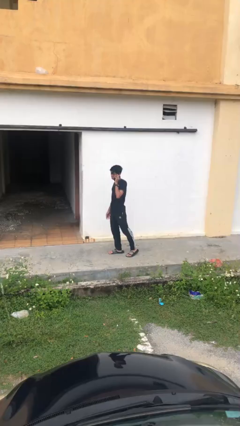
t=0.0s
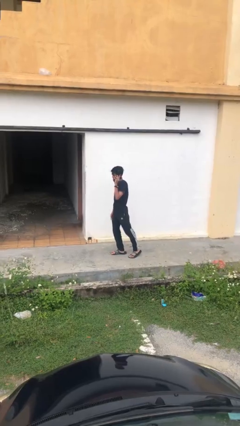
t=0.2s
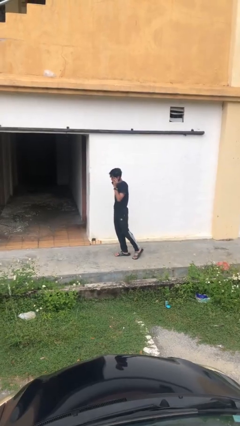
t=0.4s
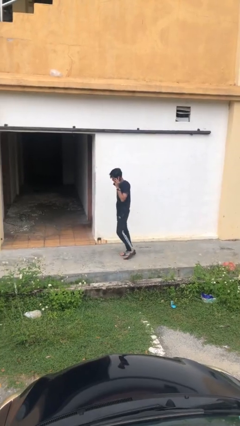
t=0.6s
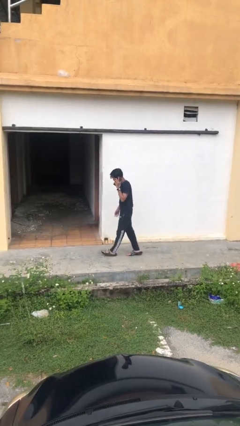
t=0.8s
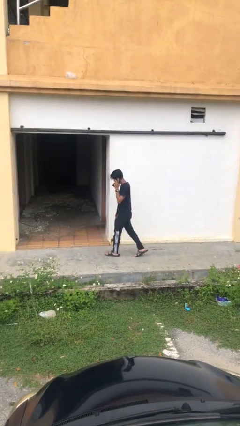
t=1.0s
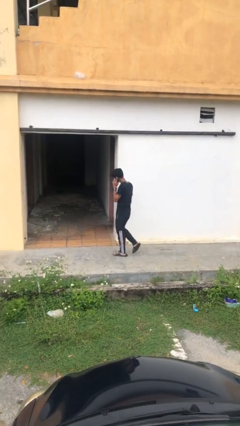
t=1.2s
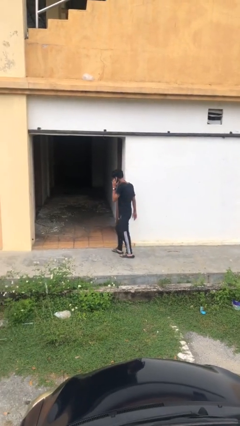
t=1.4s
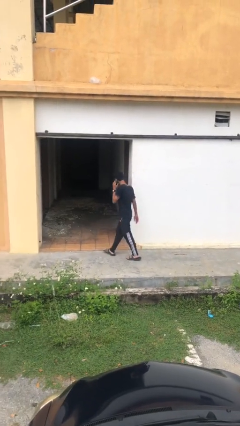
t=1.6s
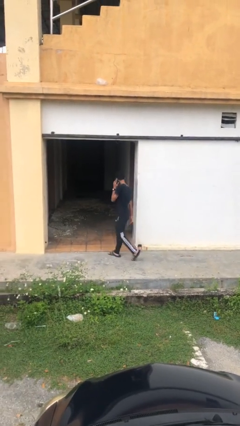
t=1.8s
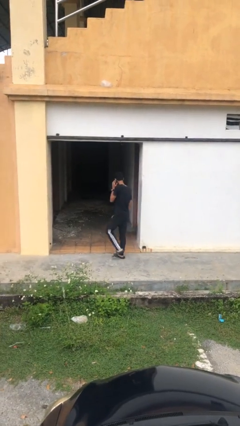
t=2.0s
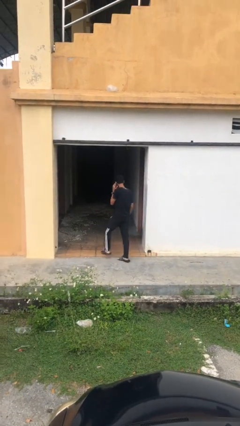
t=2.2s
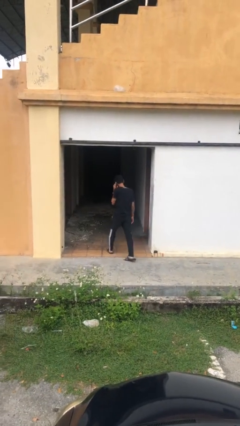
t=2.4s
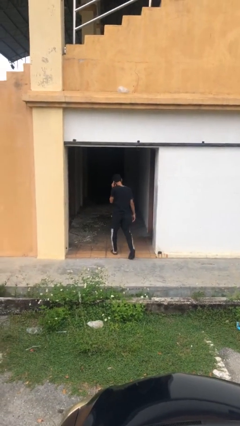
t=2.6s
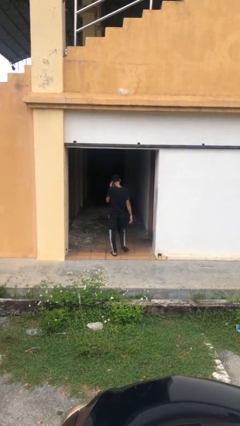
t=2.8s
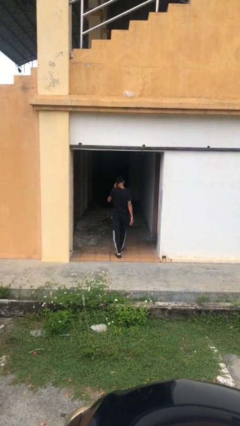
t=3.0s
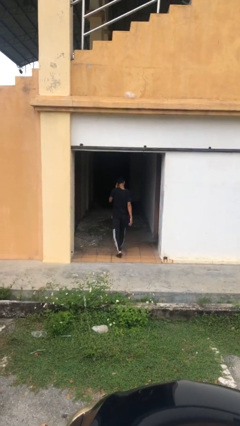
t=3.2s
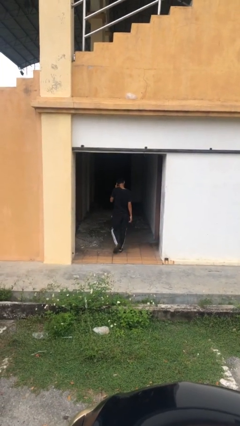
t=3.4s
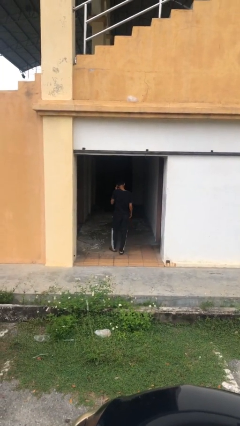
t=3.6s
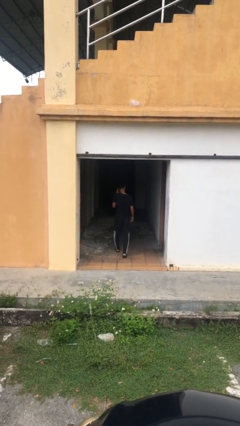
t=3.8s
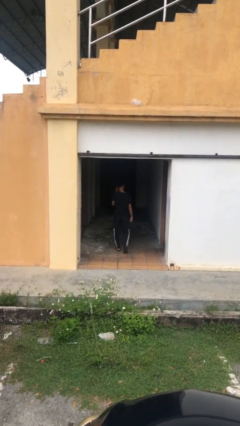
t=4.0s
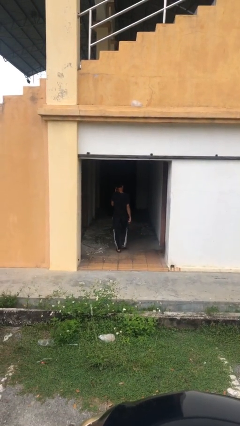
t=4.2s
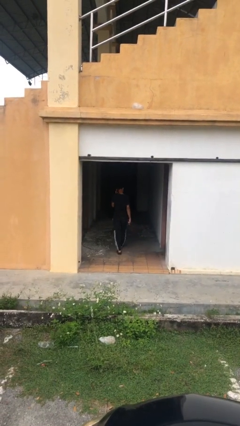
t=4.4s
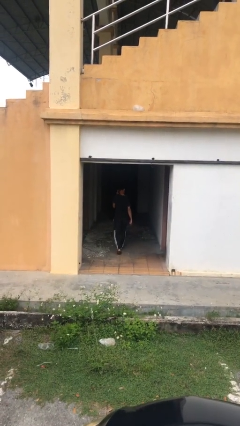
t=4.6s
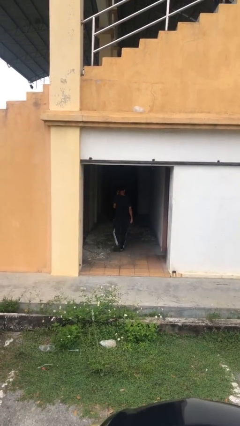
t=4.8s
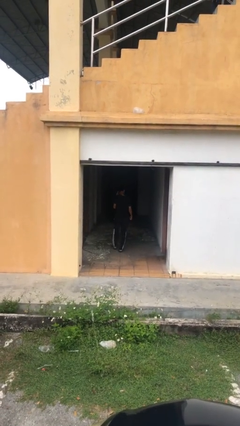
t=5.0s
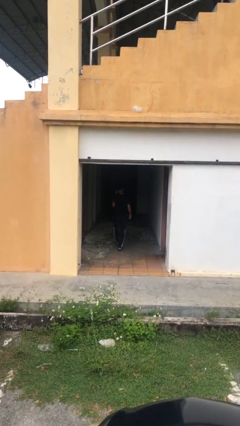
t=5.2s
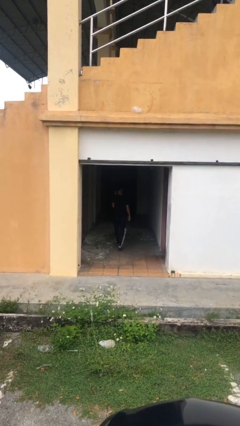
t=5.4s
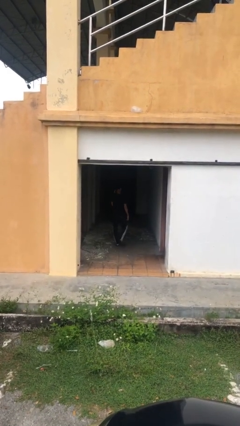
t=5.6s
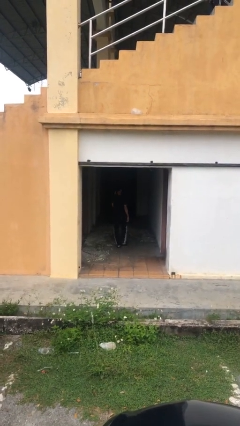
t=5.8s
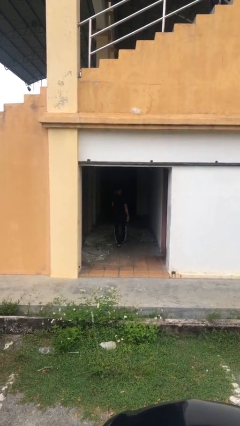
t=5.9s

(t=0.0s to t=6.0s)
person exits scene through structure

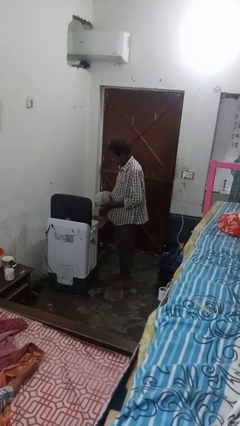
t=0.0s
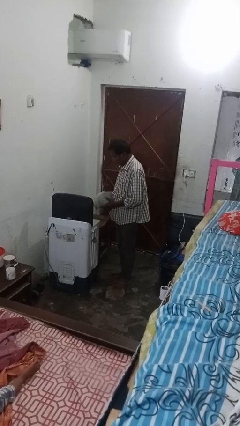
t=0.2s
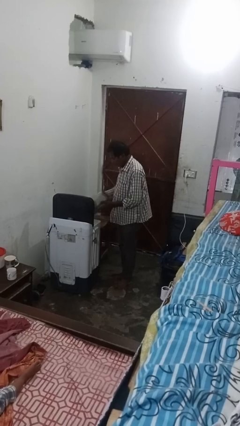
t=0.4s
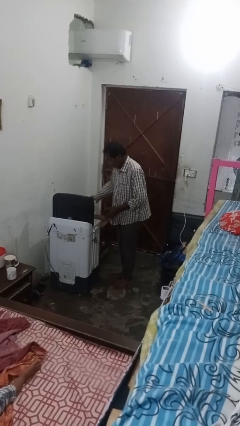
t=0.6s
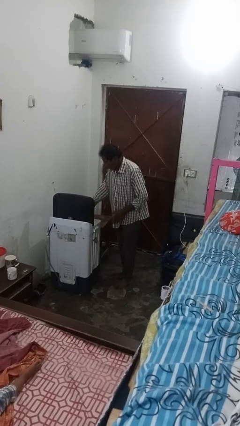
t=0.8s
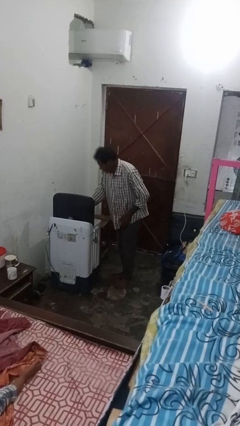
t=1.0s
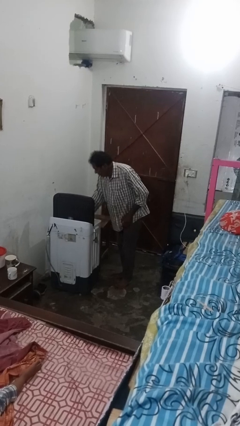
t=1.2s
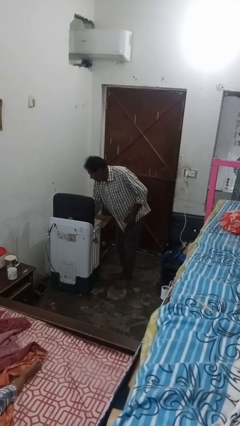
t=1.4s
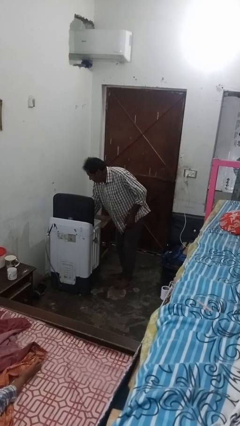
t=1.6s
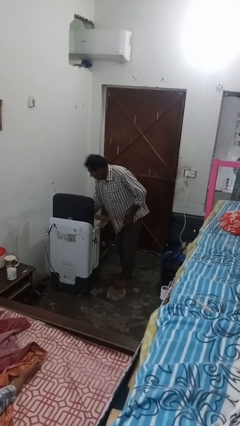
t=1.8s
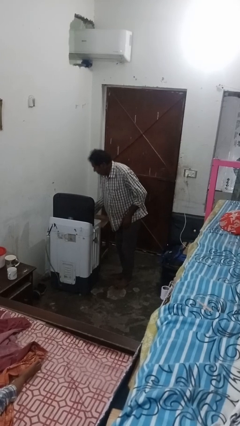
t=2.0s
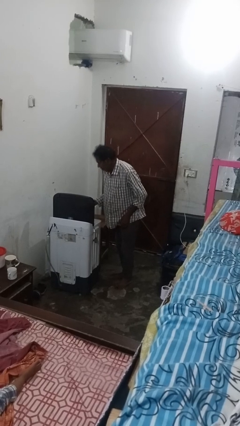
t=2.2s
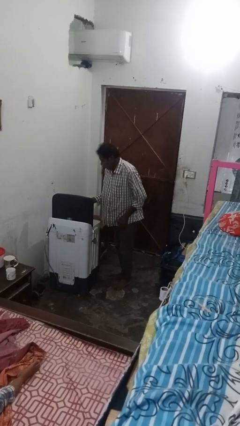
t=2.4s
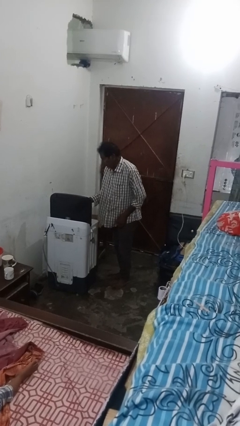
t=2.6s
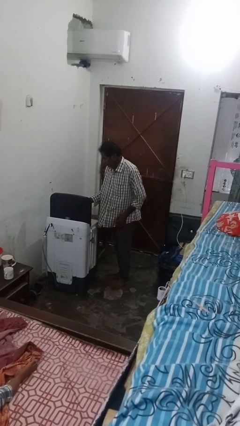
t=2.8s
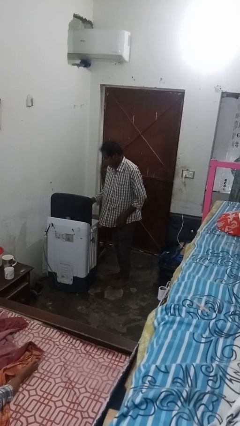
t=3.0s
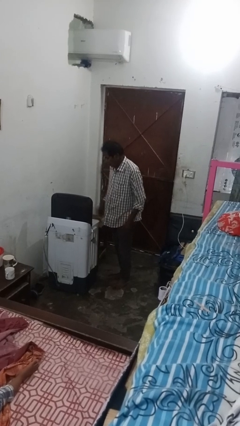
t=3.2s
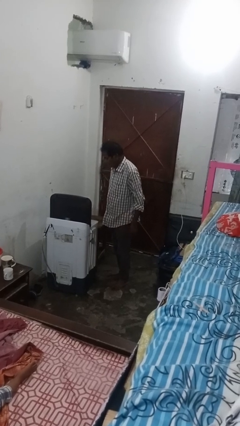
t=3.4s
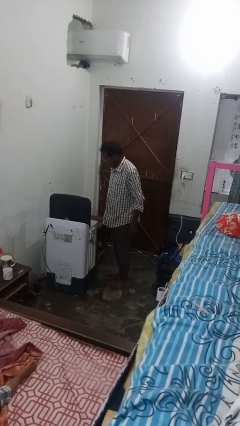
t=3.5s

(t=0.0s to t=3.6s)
person loads dryer

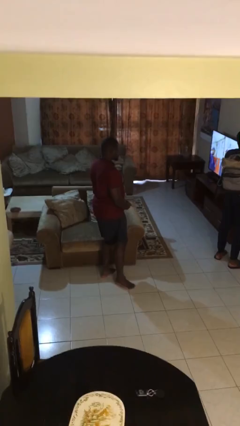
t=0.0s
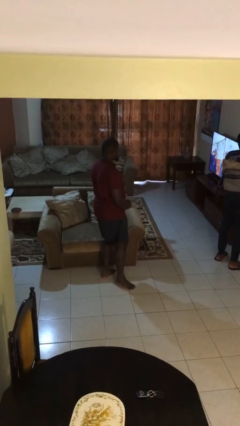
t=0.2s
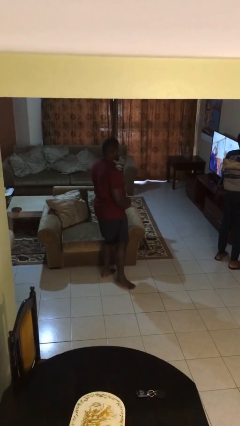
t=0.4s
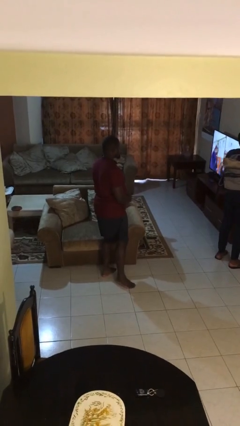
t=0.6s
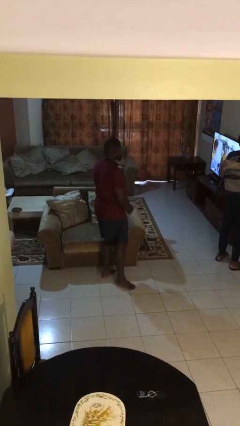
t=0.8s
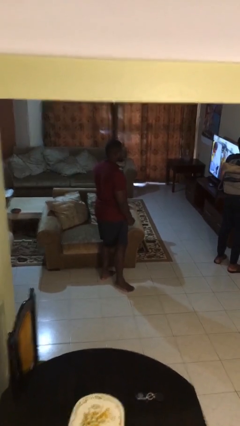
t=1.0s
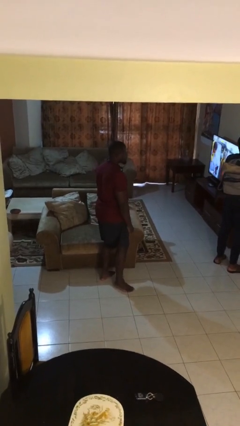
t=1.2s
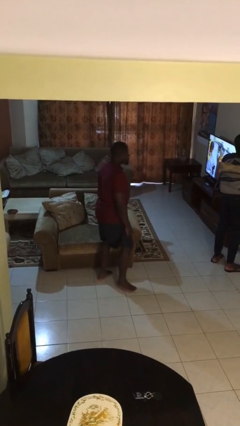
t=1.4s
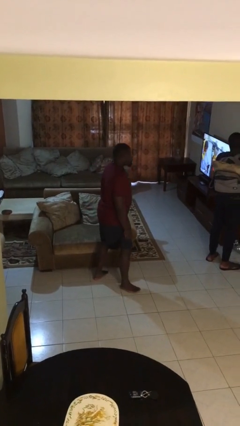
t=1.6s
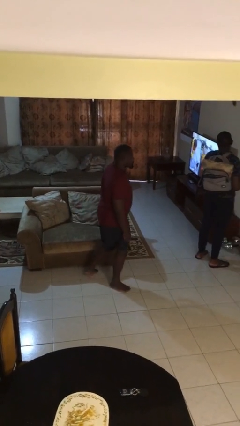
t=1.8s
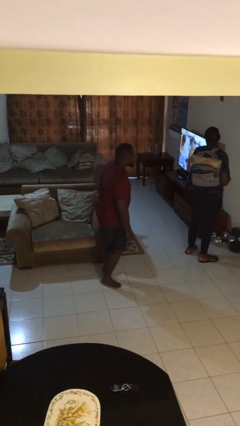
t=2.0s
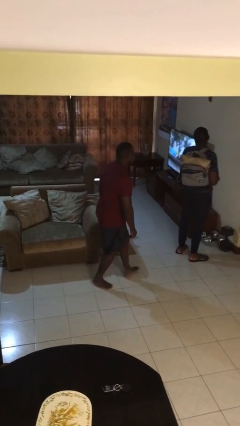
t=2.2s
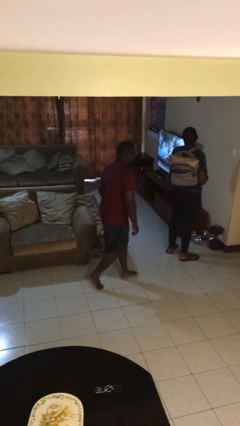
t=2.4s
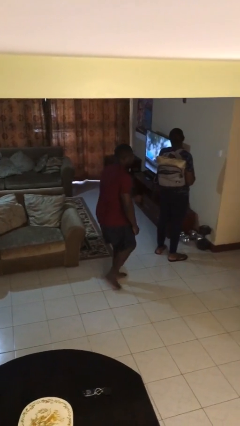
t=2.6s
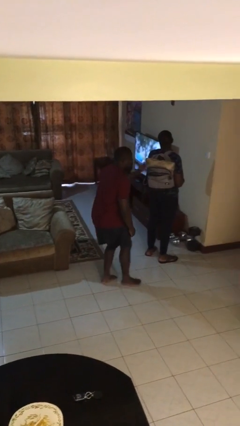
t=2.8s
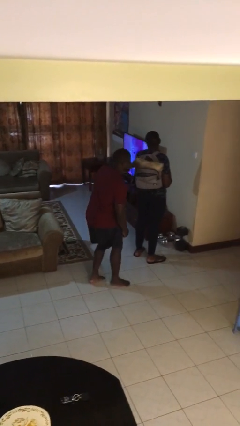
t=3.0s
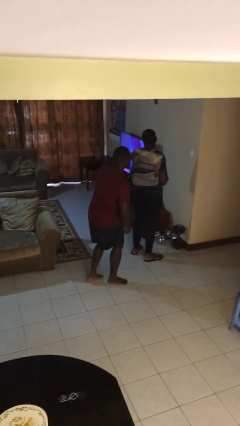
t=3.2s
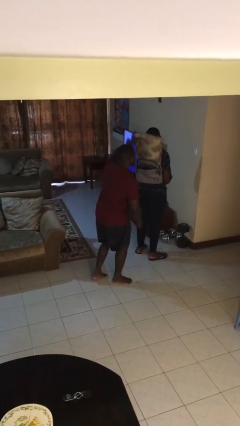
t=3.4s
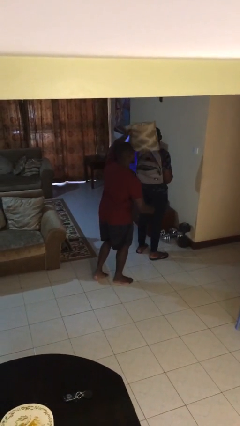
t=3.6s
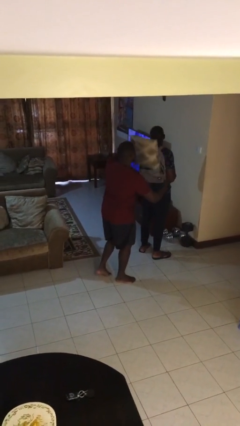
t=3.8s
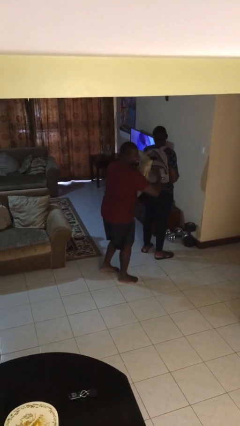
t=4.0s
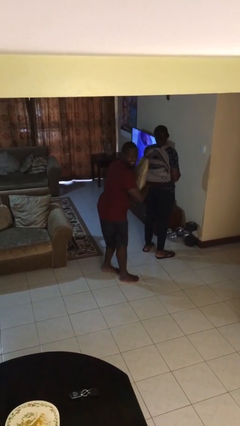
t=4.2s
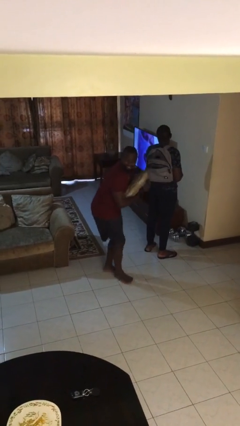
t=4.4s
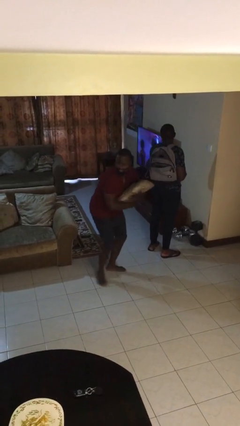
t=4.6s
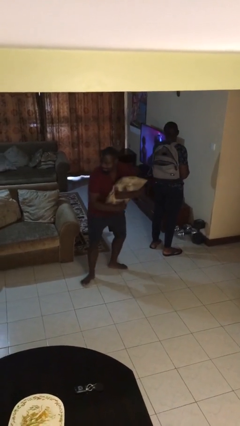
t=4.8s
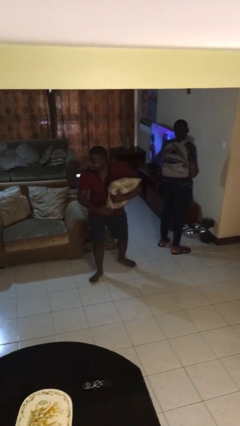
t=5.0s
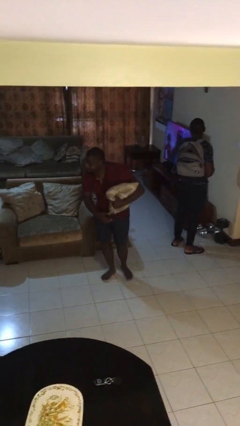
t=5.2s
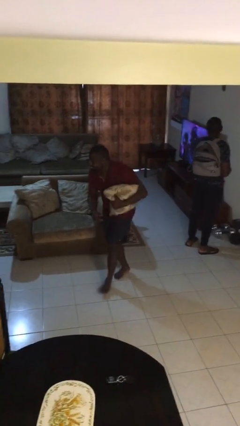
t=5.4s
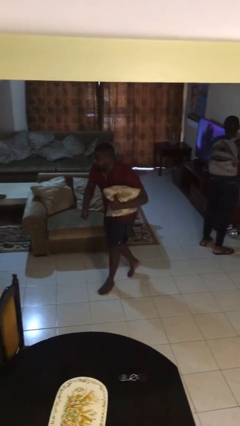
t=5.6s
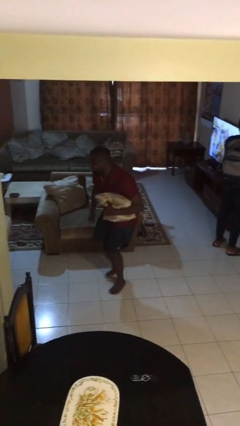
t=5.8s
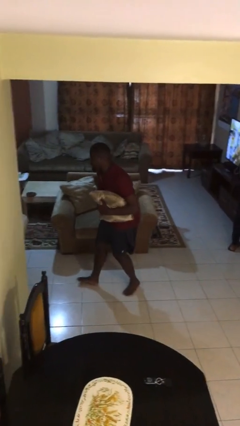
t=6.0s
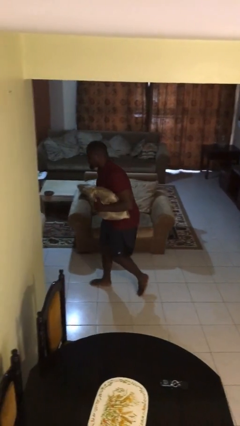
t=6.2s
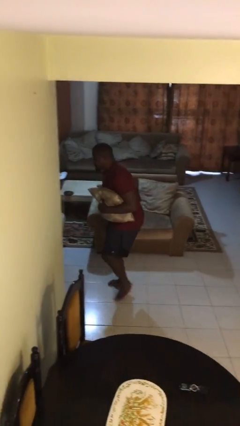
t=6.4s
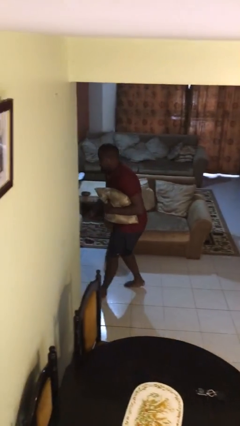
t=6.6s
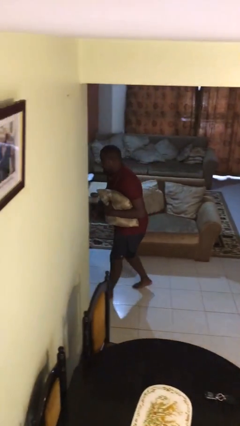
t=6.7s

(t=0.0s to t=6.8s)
person steals object from person

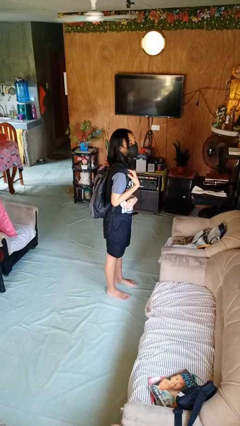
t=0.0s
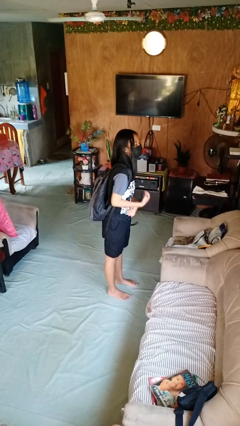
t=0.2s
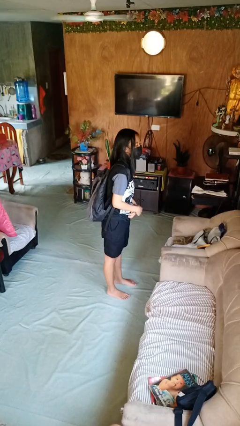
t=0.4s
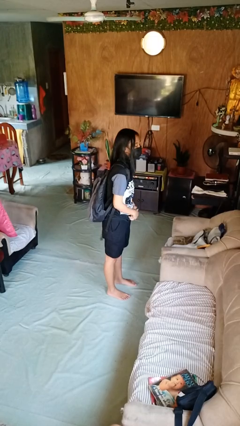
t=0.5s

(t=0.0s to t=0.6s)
person puts on backpack

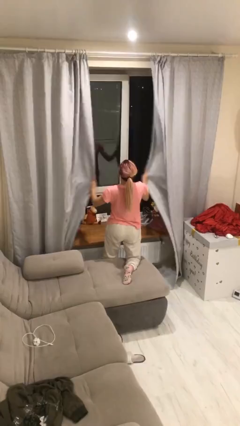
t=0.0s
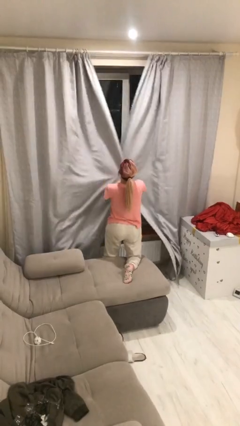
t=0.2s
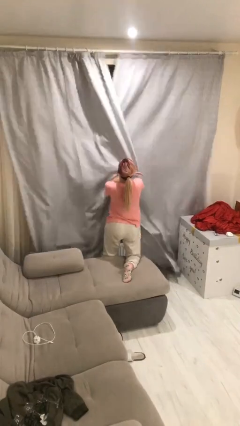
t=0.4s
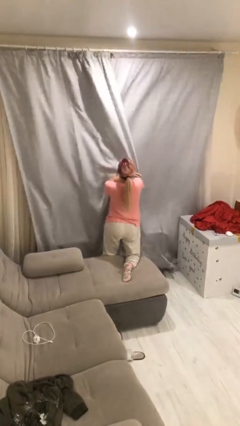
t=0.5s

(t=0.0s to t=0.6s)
person closes curtains
